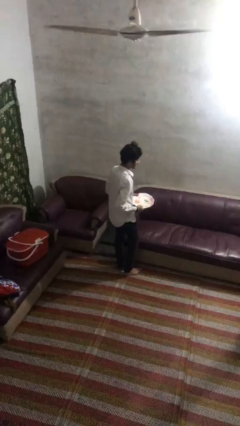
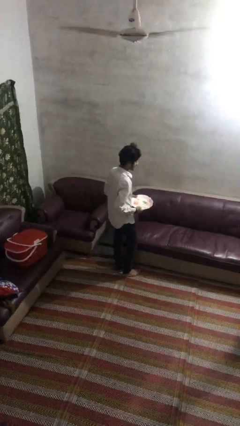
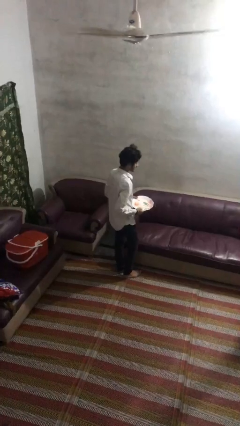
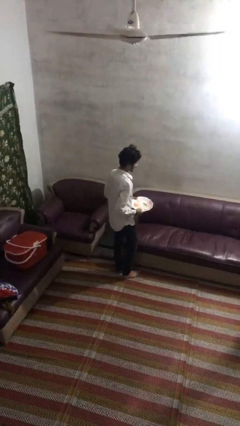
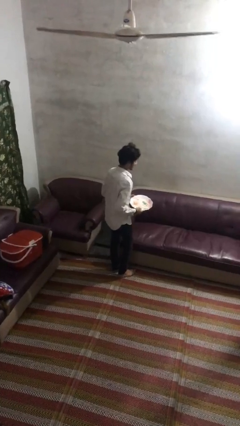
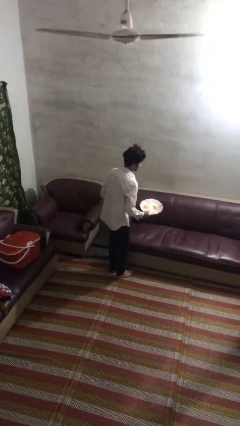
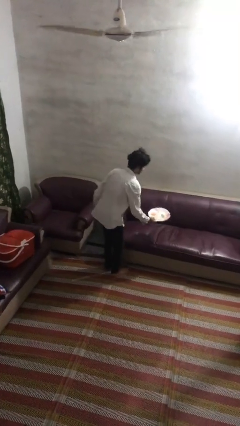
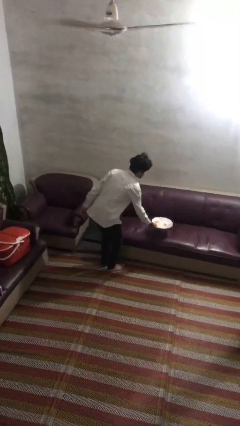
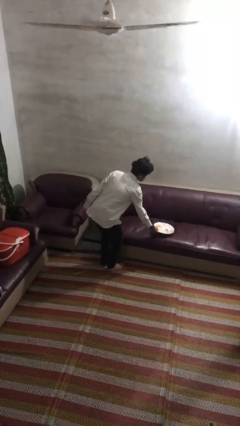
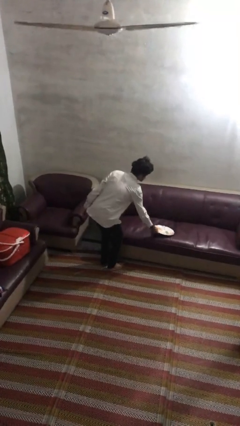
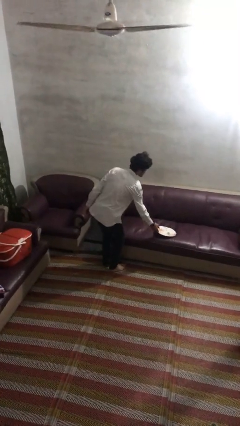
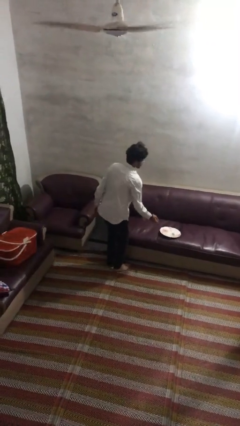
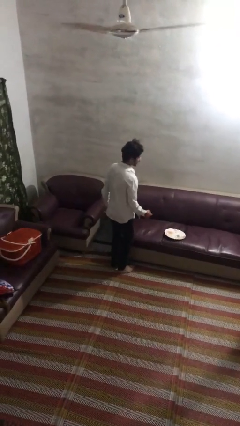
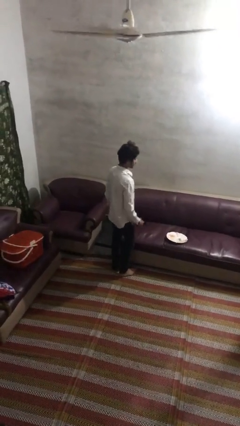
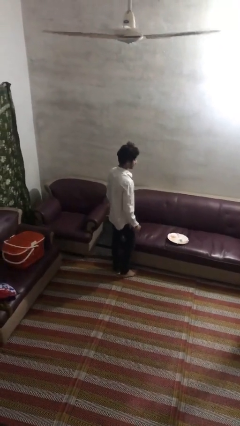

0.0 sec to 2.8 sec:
person puts down object on couch

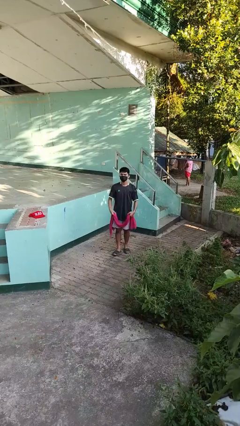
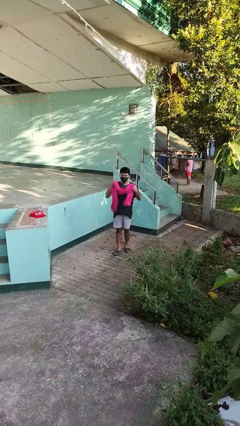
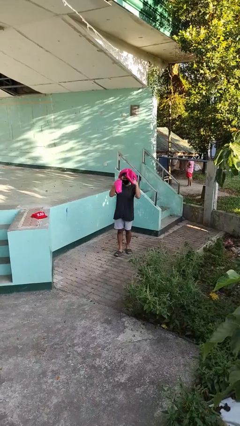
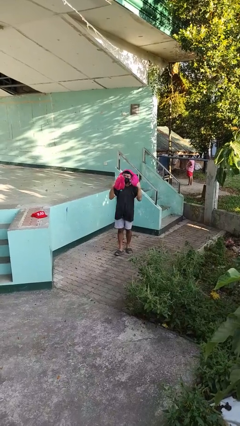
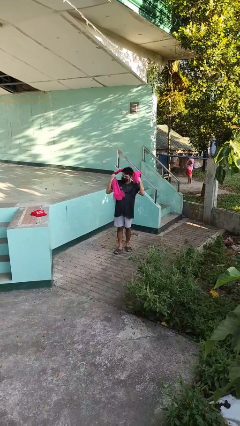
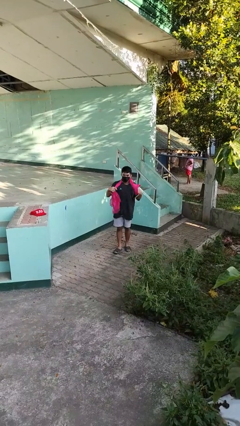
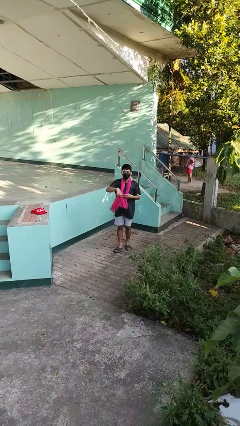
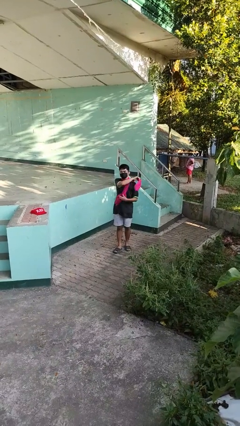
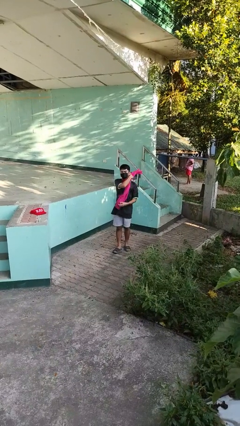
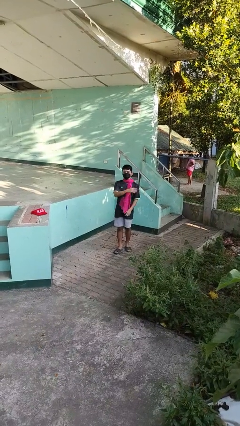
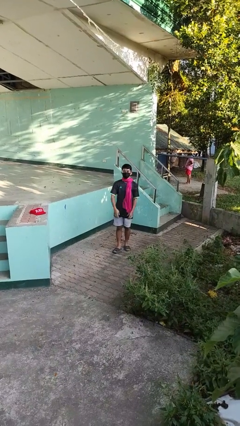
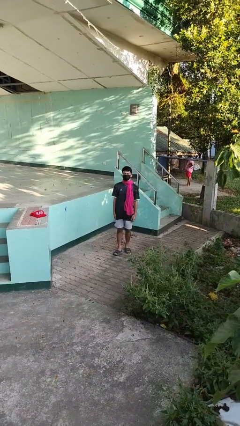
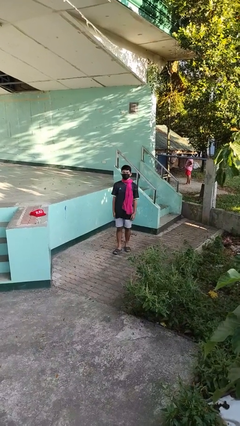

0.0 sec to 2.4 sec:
person puts on scarf

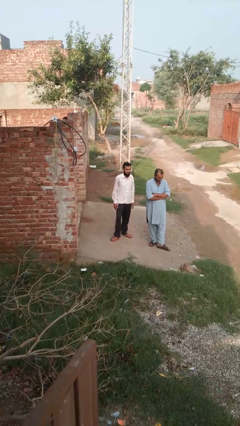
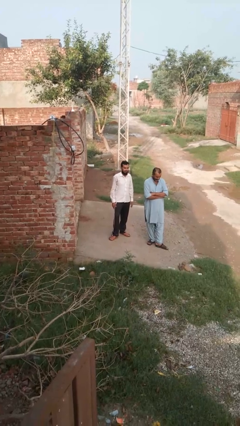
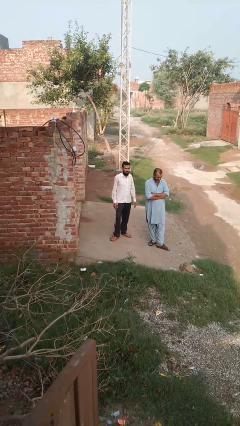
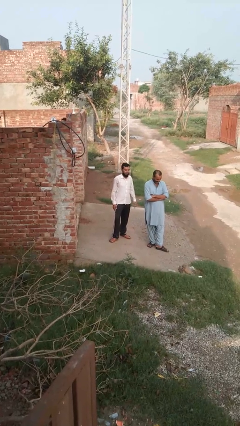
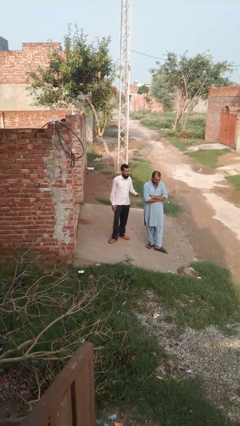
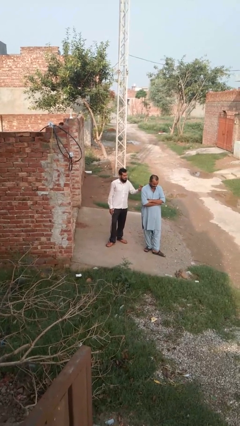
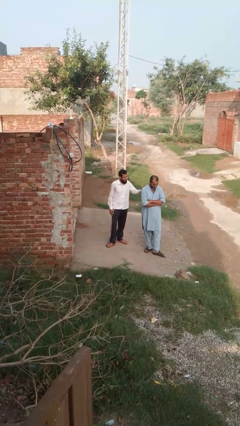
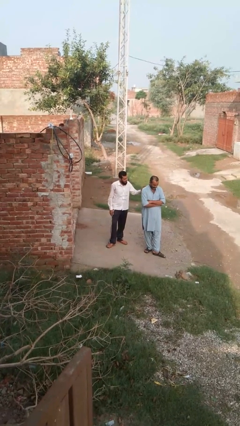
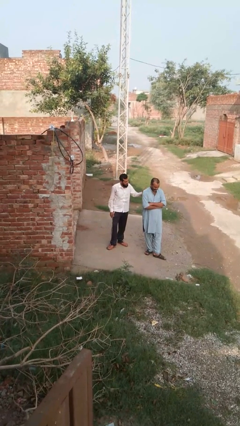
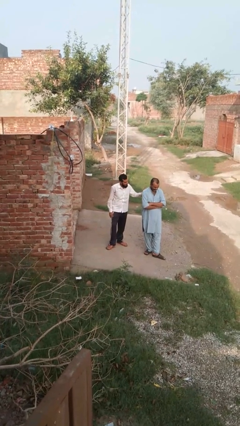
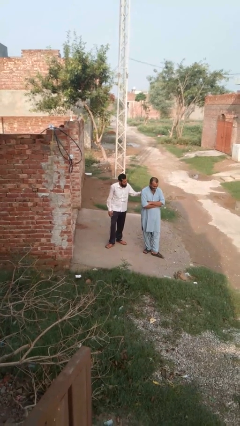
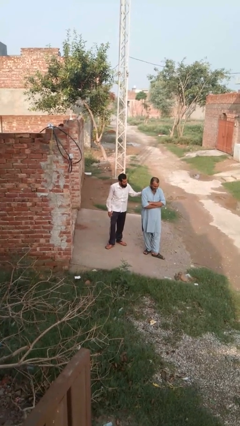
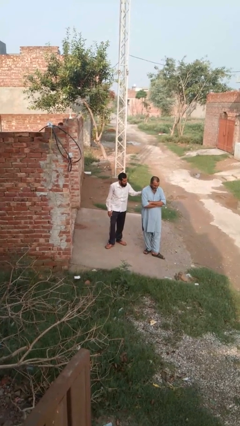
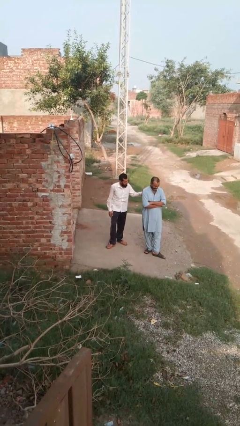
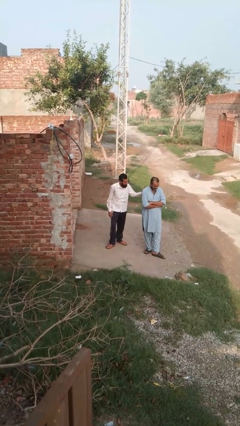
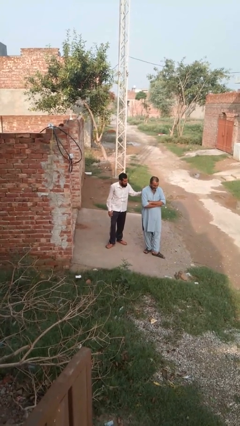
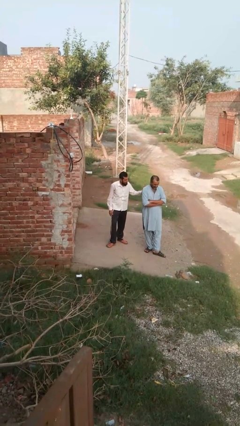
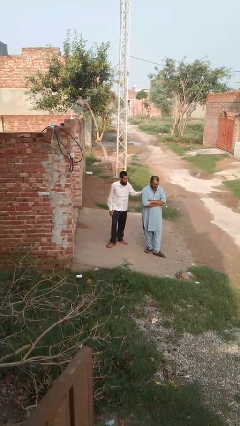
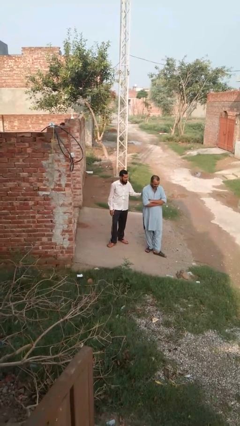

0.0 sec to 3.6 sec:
person pounds shoulders of person

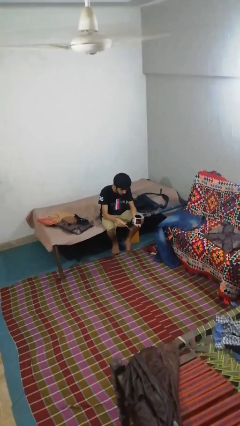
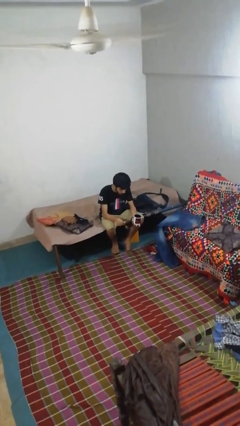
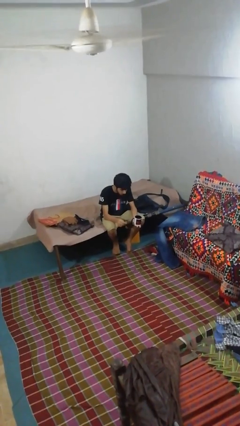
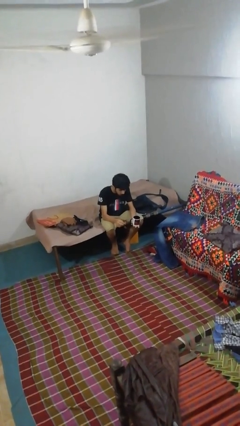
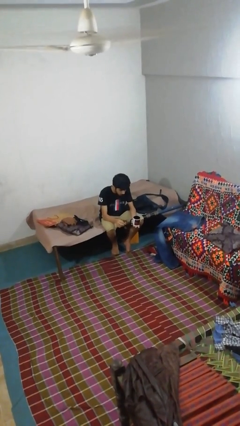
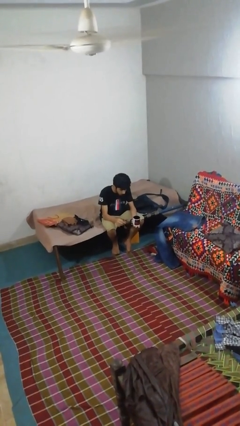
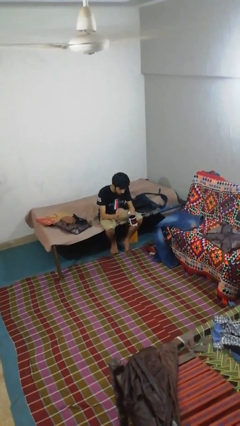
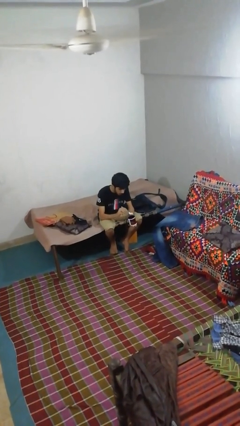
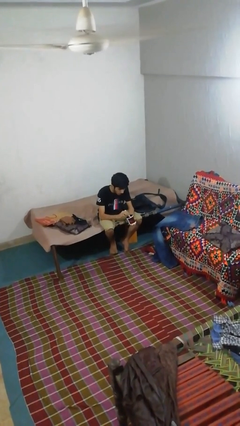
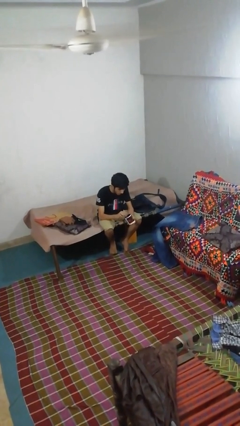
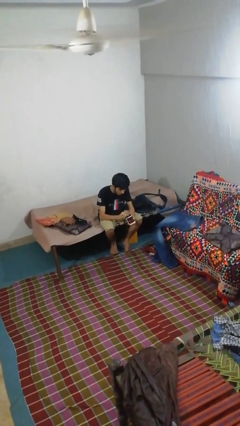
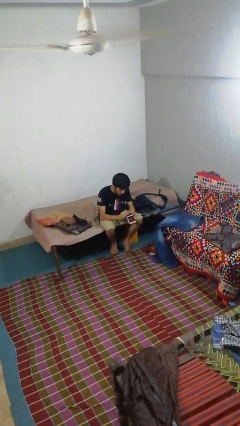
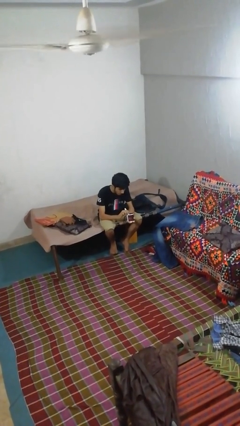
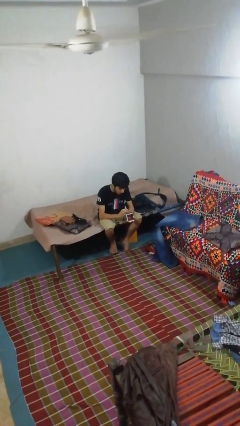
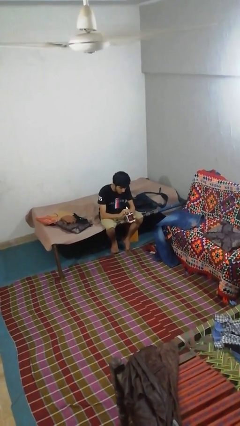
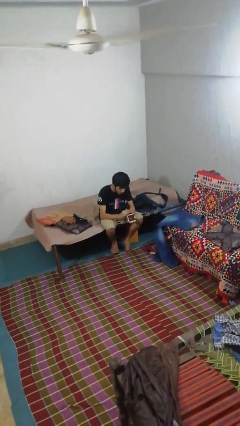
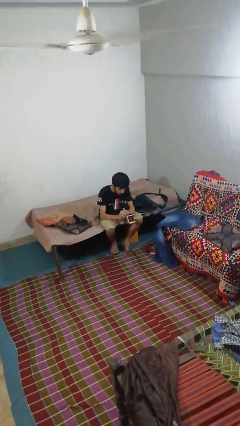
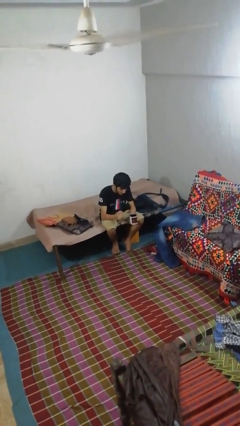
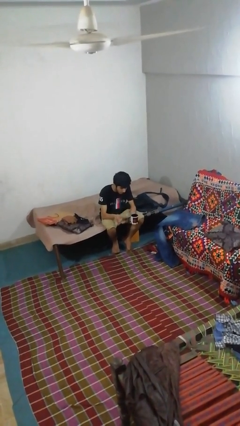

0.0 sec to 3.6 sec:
person stirs mug

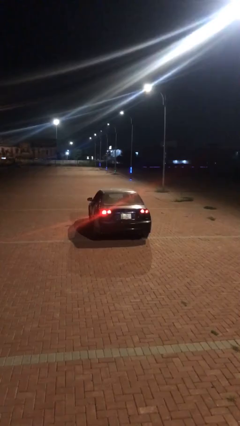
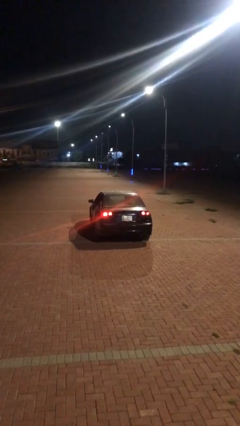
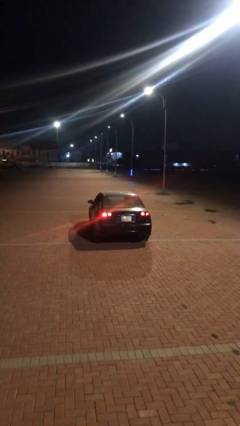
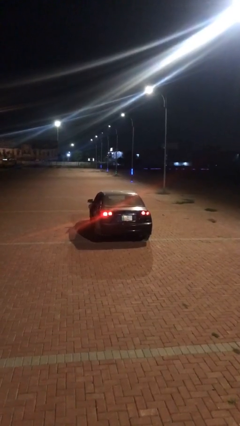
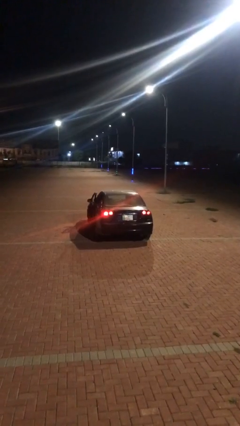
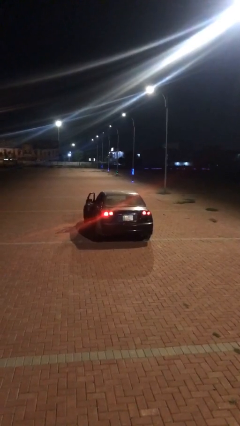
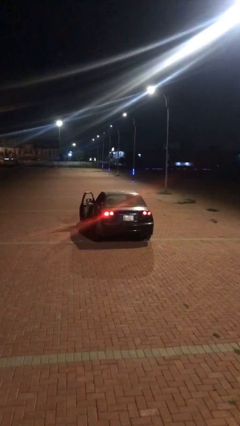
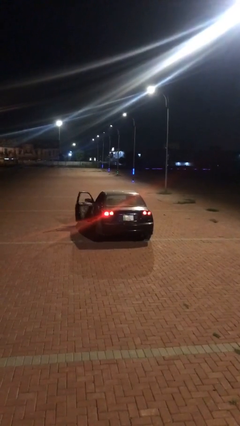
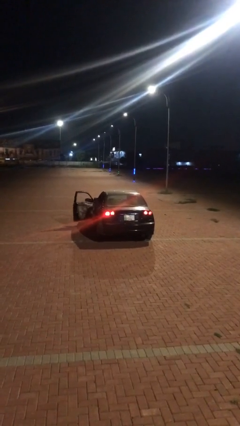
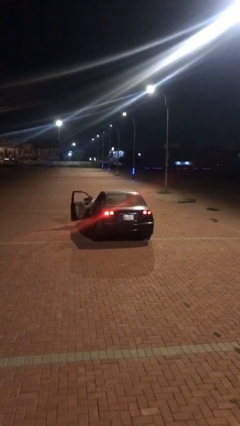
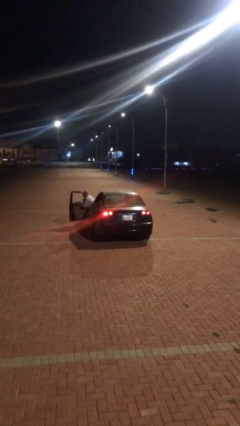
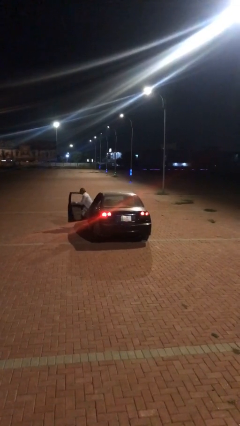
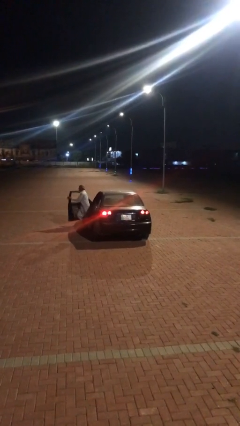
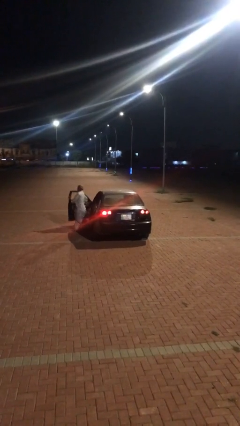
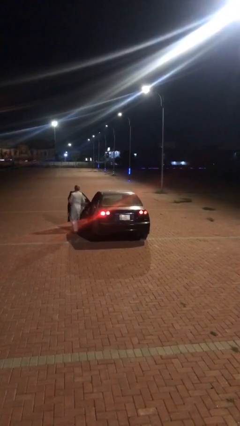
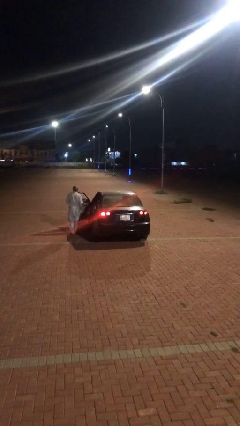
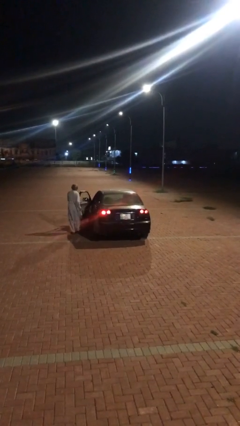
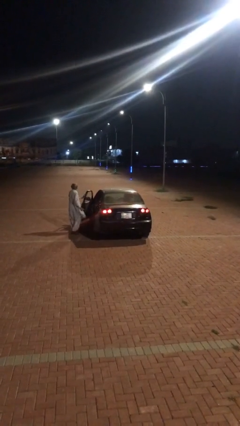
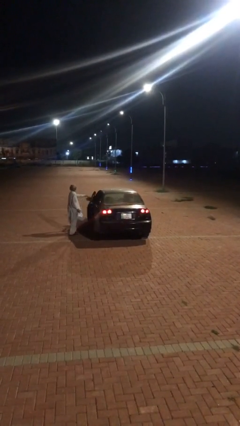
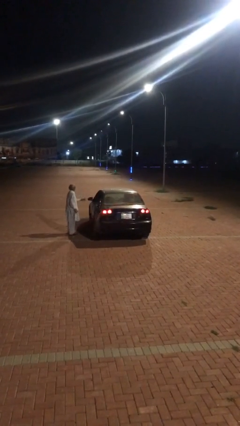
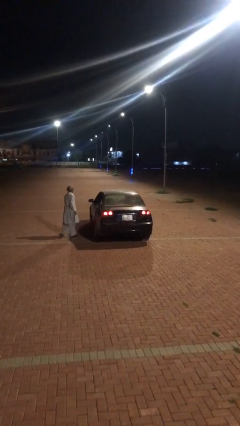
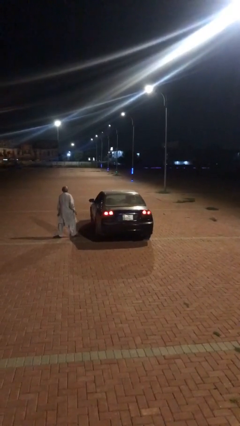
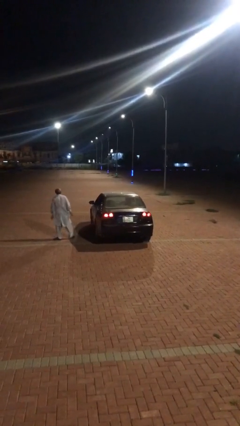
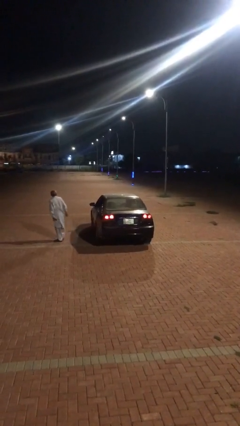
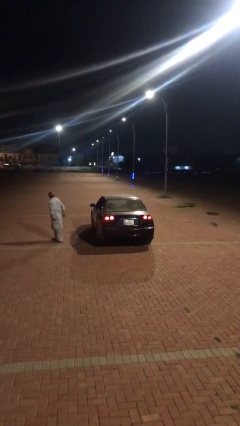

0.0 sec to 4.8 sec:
car drops off person

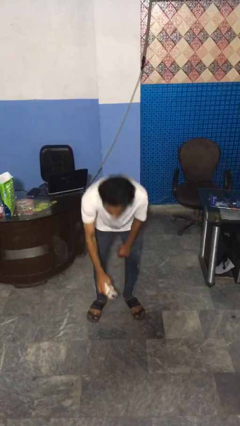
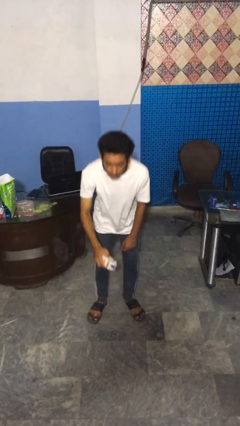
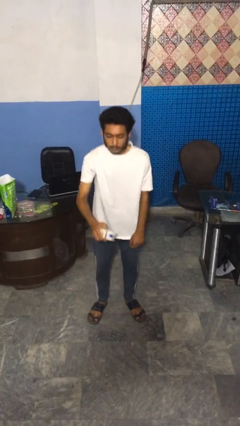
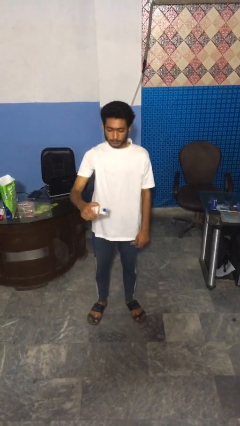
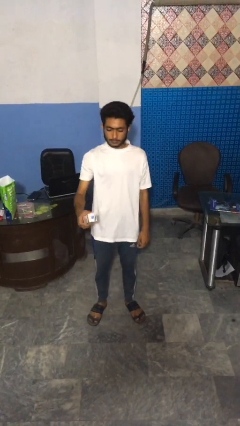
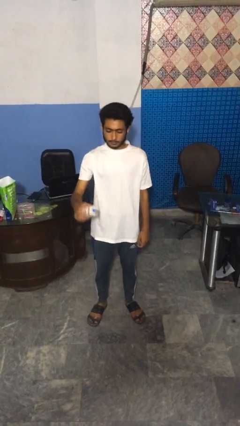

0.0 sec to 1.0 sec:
person picks up object from floor
